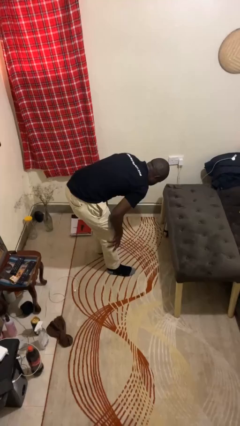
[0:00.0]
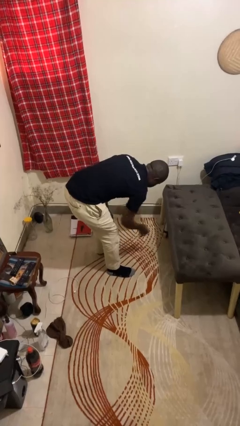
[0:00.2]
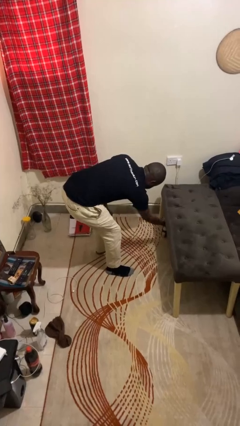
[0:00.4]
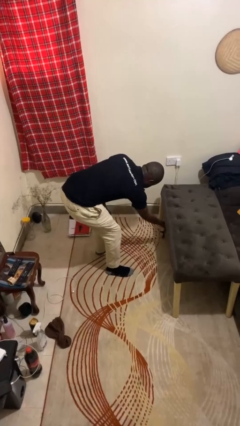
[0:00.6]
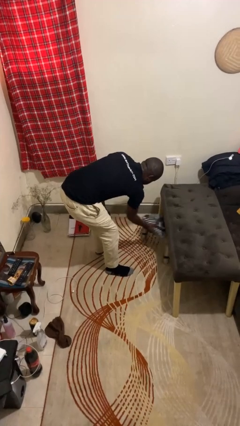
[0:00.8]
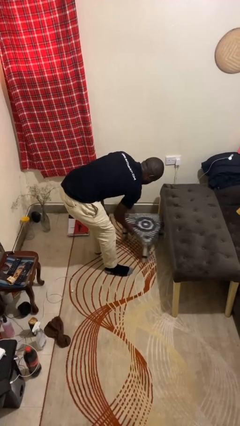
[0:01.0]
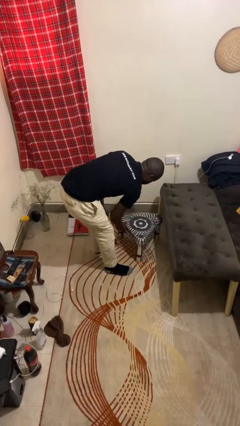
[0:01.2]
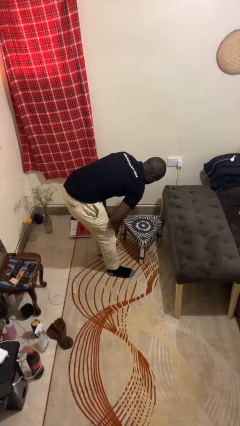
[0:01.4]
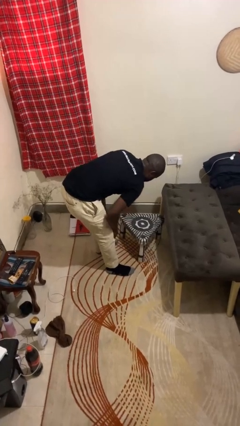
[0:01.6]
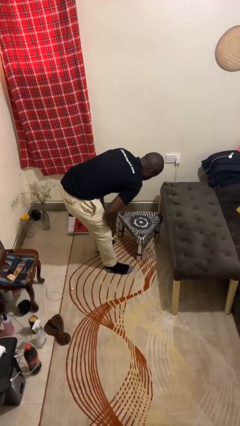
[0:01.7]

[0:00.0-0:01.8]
person pulls out chair

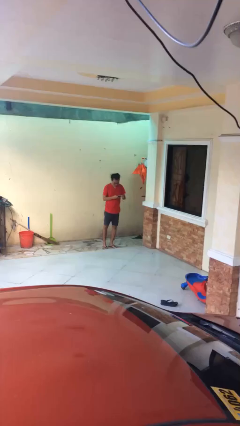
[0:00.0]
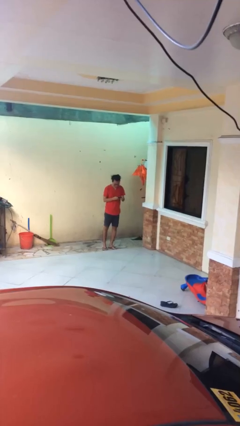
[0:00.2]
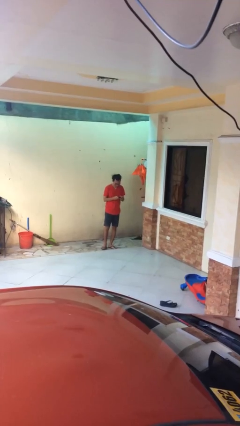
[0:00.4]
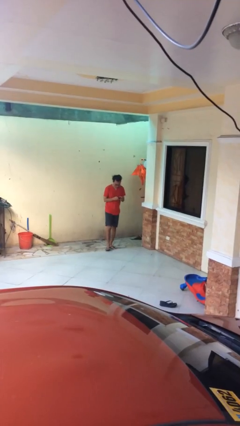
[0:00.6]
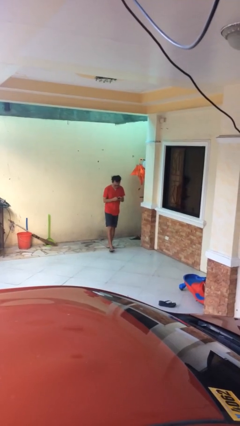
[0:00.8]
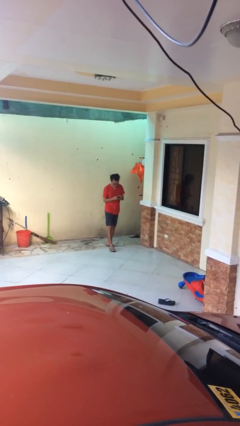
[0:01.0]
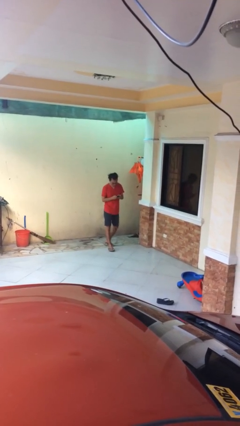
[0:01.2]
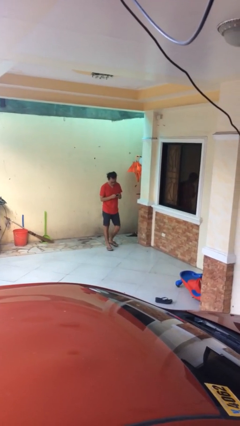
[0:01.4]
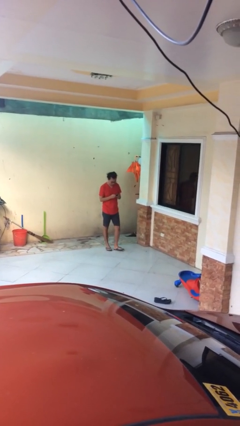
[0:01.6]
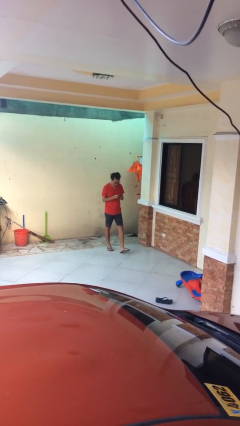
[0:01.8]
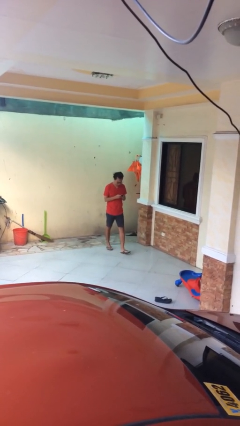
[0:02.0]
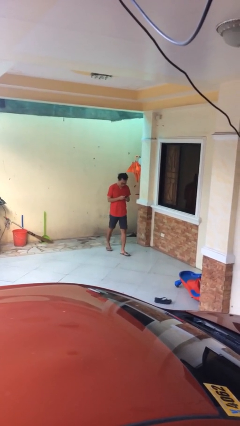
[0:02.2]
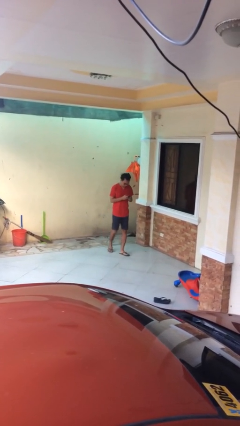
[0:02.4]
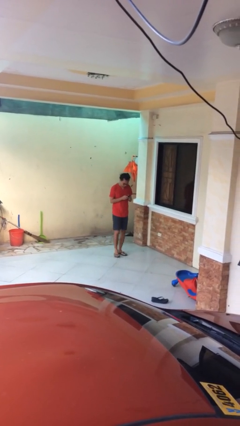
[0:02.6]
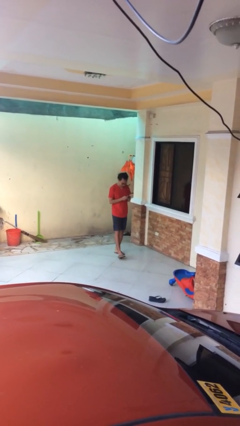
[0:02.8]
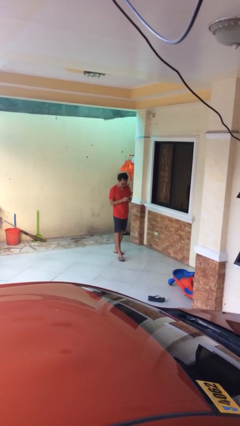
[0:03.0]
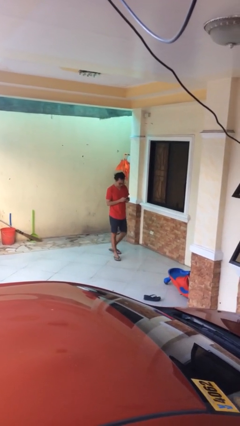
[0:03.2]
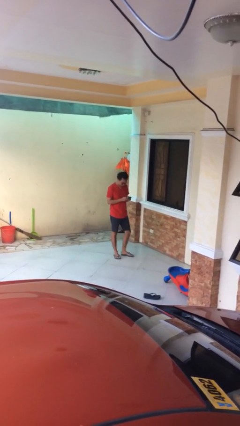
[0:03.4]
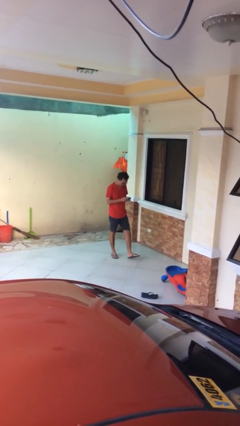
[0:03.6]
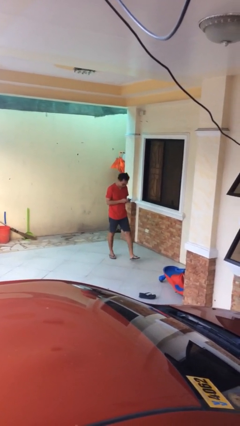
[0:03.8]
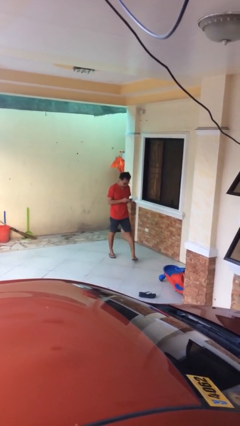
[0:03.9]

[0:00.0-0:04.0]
person texts on phone

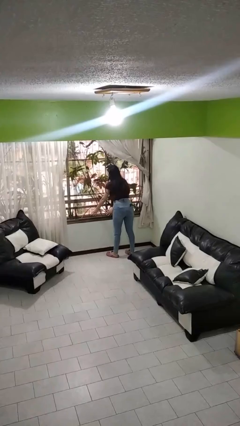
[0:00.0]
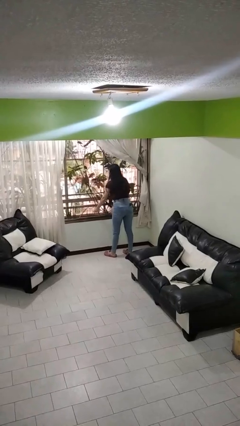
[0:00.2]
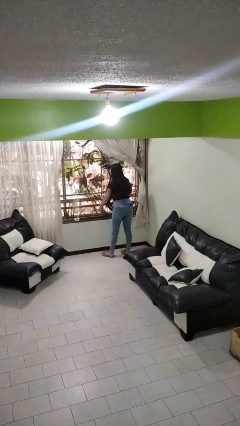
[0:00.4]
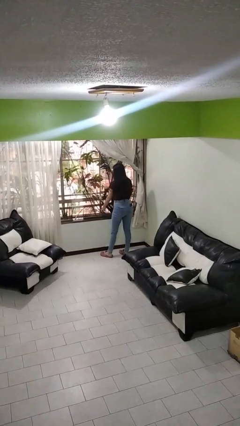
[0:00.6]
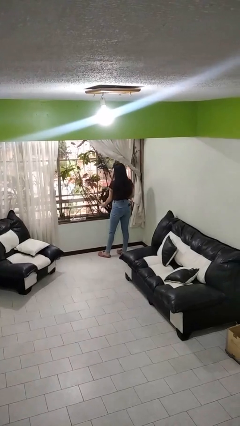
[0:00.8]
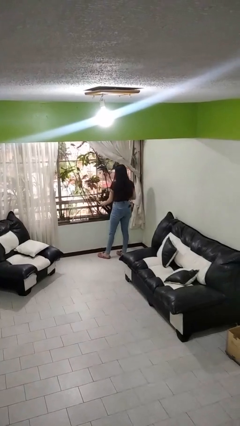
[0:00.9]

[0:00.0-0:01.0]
person opens home window

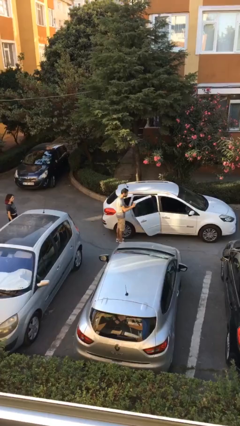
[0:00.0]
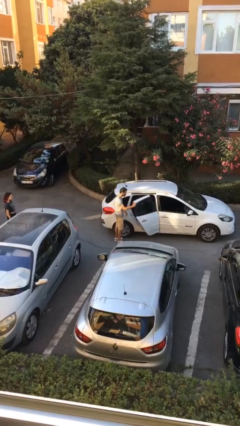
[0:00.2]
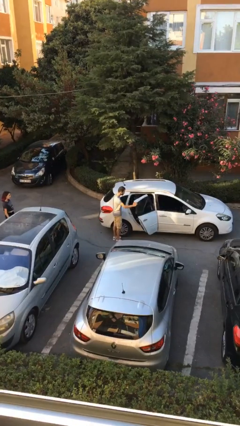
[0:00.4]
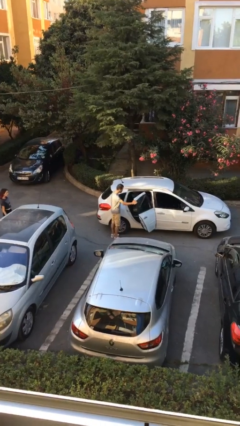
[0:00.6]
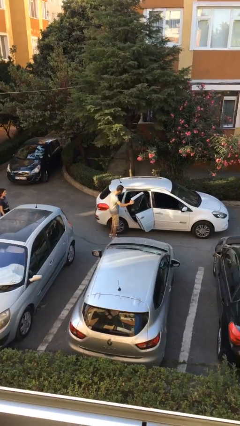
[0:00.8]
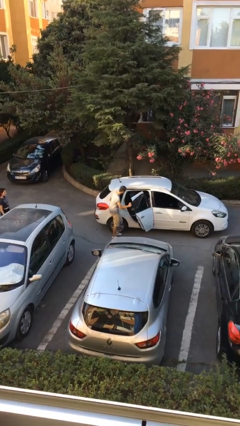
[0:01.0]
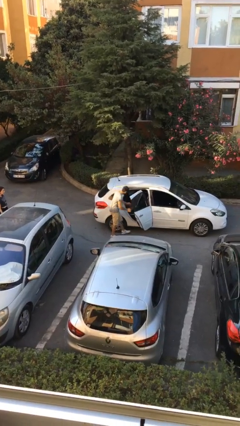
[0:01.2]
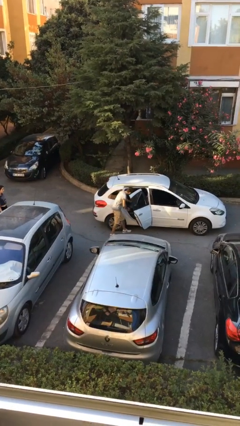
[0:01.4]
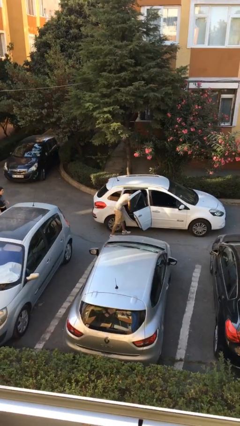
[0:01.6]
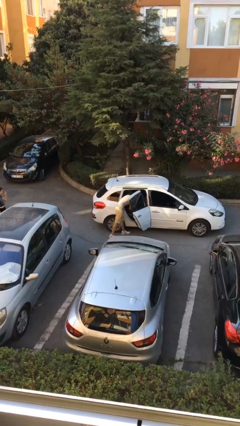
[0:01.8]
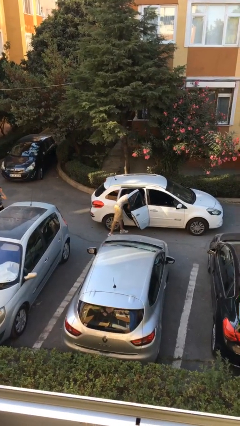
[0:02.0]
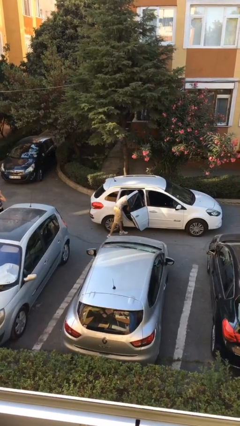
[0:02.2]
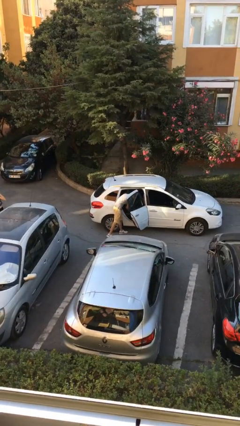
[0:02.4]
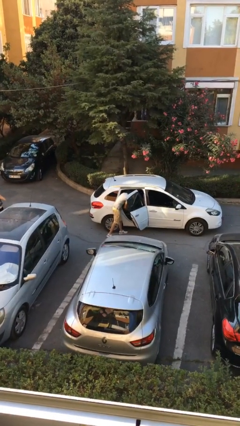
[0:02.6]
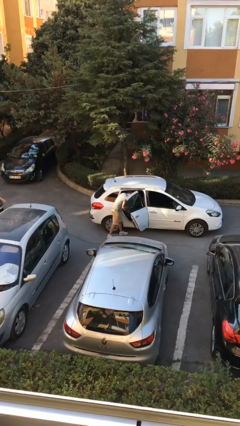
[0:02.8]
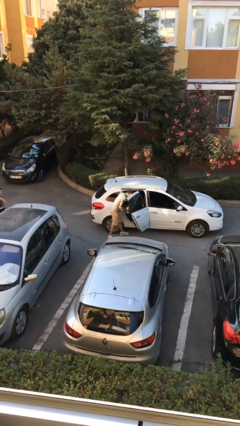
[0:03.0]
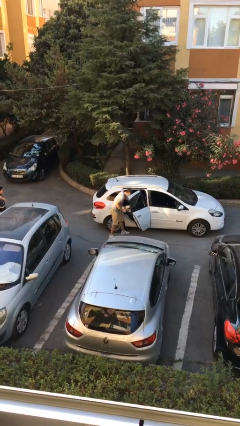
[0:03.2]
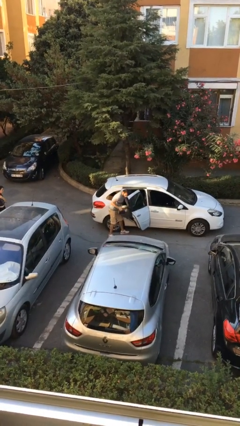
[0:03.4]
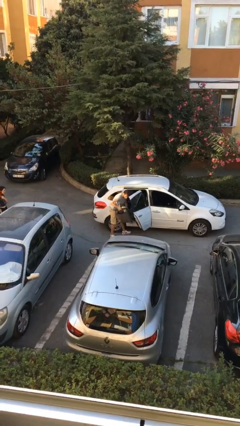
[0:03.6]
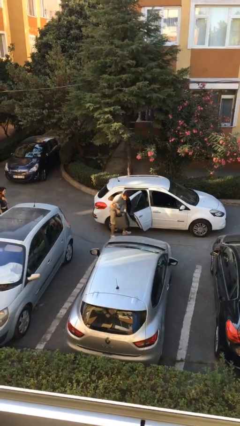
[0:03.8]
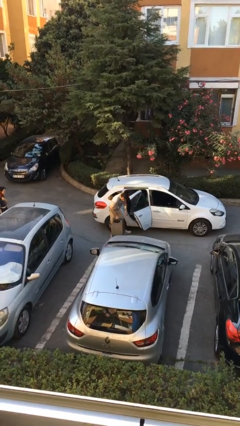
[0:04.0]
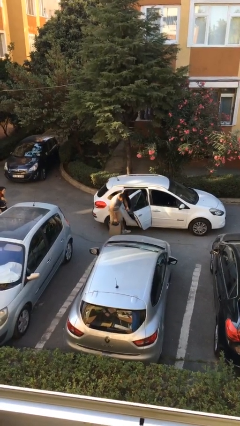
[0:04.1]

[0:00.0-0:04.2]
person unloads car

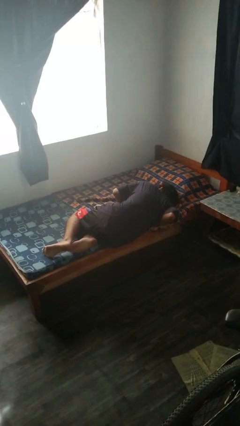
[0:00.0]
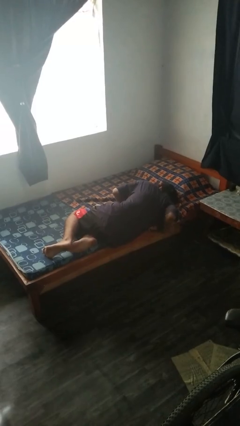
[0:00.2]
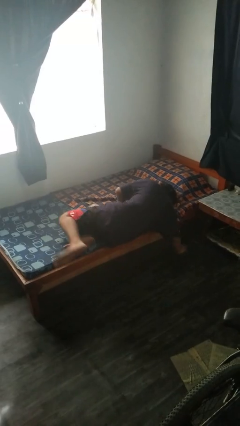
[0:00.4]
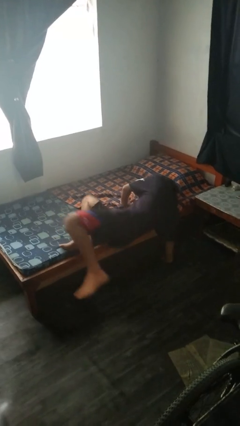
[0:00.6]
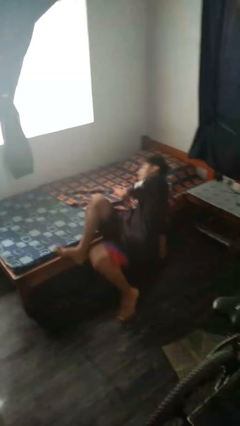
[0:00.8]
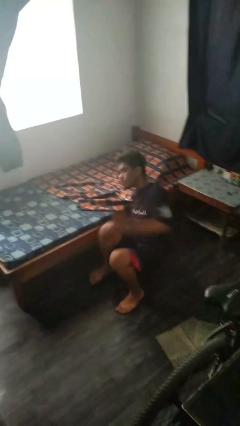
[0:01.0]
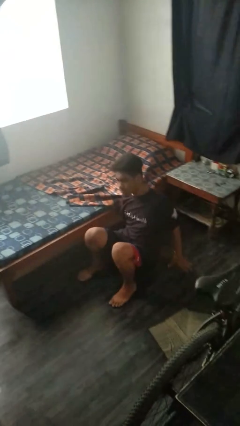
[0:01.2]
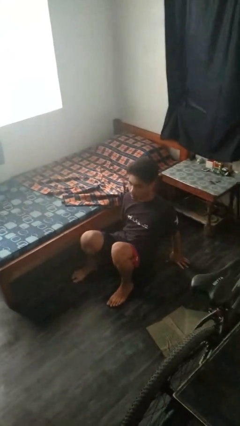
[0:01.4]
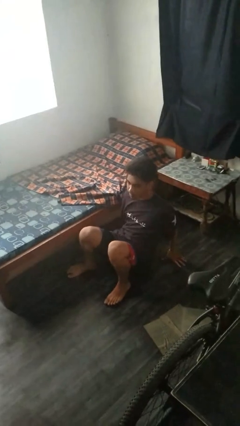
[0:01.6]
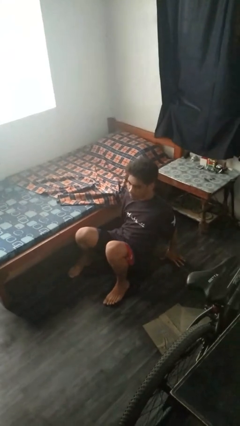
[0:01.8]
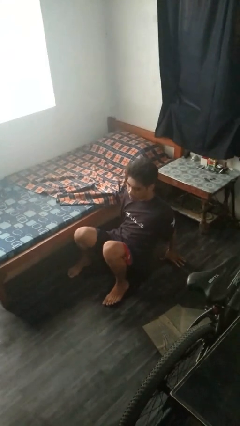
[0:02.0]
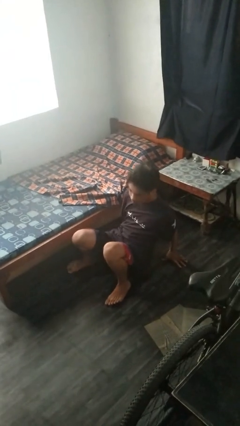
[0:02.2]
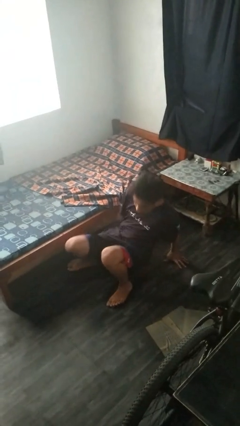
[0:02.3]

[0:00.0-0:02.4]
person falls from bed

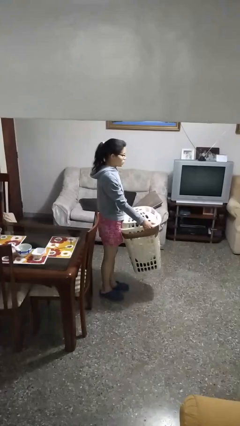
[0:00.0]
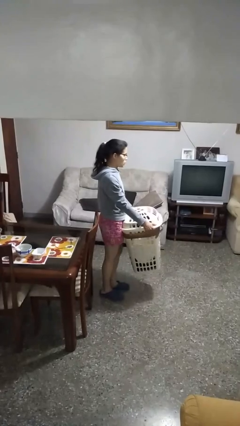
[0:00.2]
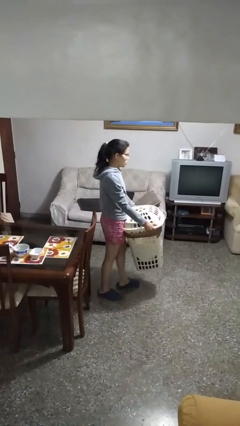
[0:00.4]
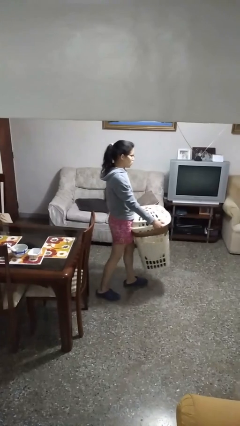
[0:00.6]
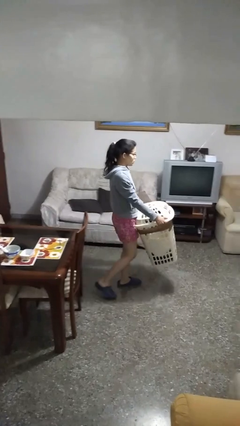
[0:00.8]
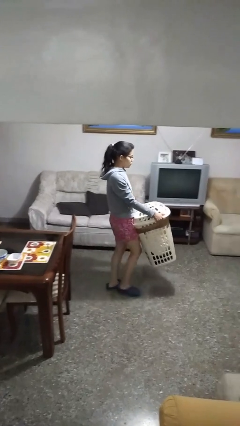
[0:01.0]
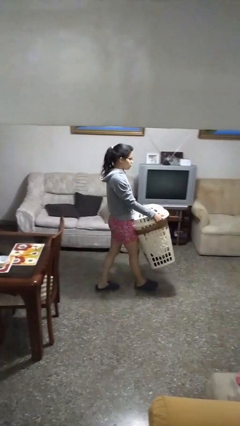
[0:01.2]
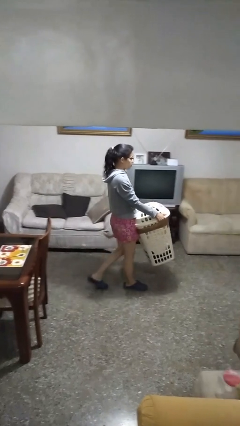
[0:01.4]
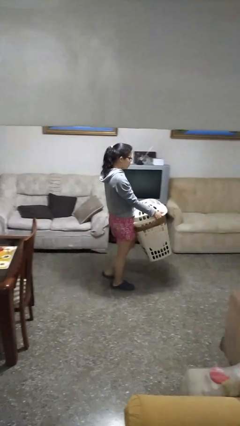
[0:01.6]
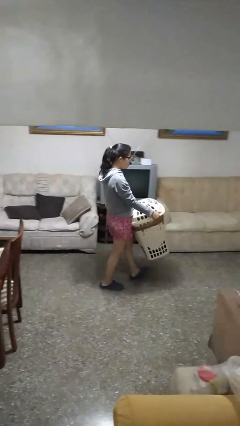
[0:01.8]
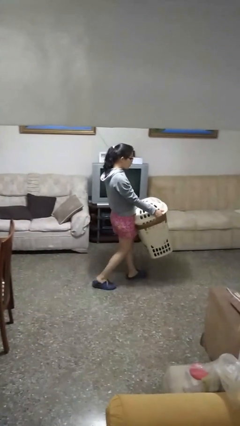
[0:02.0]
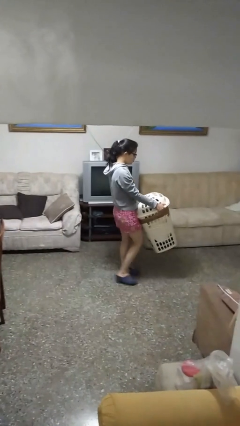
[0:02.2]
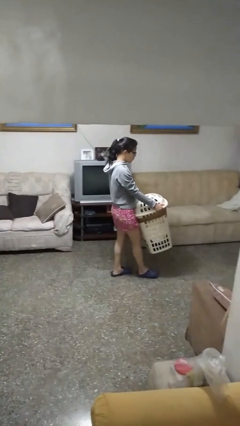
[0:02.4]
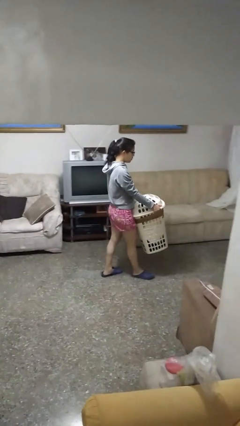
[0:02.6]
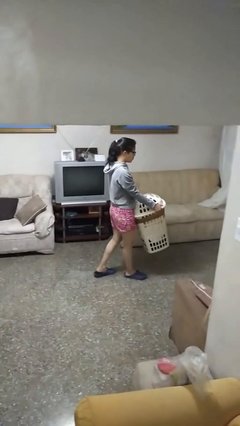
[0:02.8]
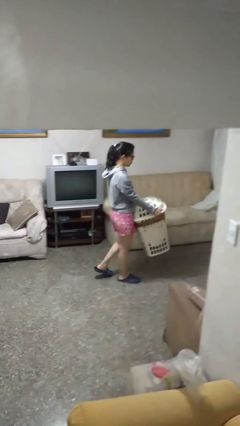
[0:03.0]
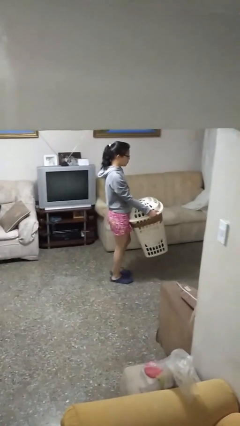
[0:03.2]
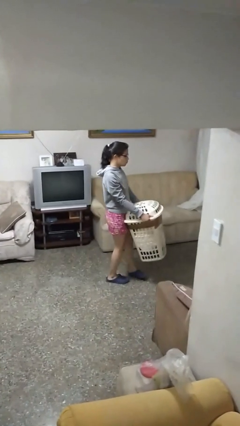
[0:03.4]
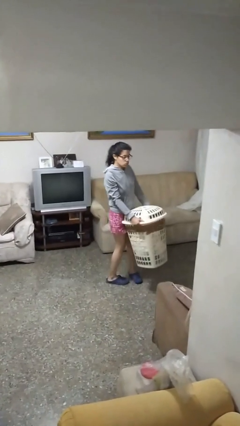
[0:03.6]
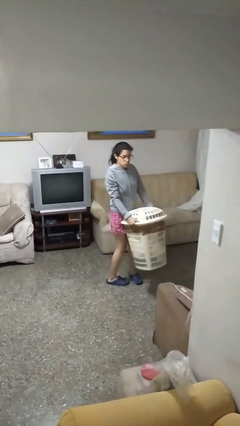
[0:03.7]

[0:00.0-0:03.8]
person carries laundry basket

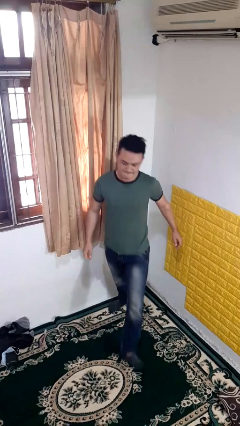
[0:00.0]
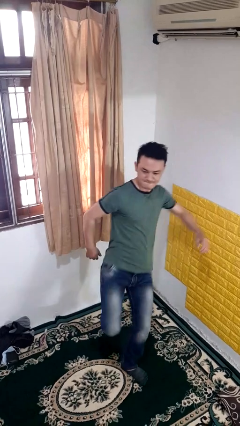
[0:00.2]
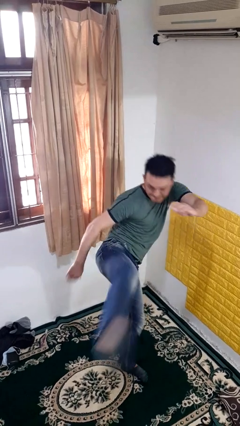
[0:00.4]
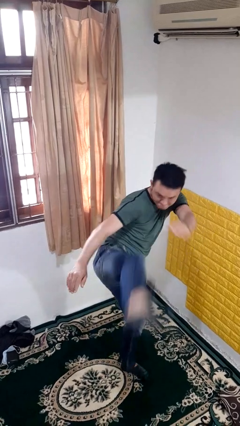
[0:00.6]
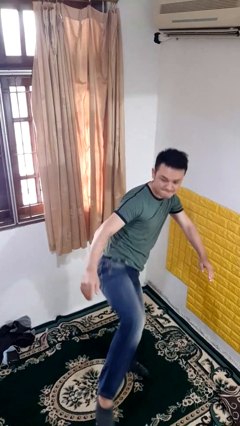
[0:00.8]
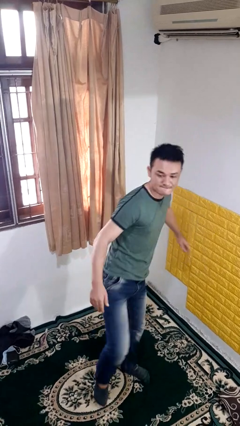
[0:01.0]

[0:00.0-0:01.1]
person karate kicks
